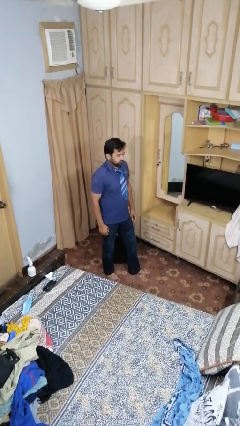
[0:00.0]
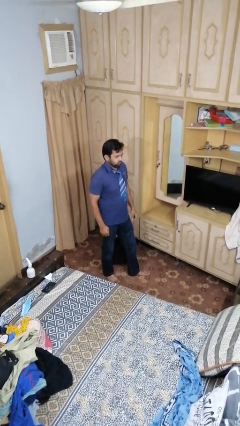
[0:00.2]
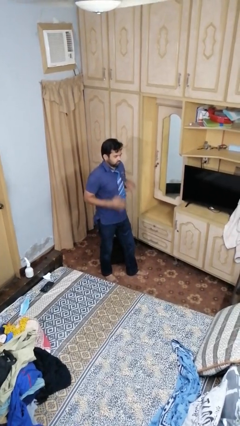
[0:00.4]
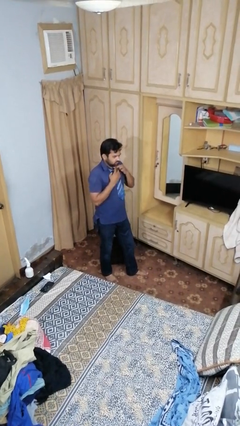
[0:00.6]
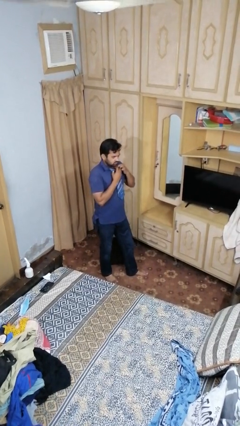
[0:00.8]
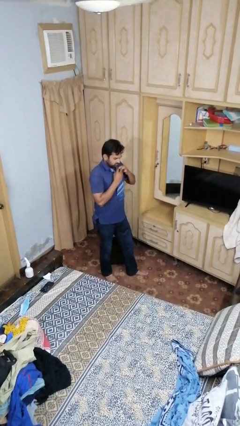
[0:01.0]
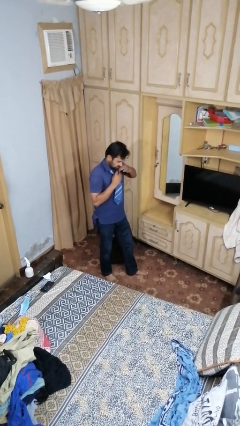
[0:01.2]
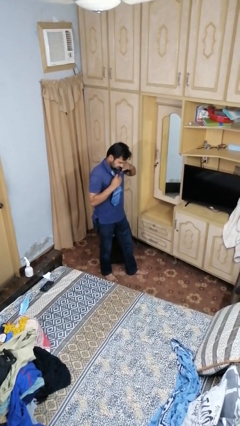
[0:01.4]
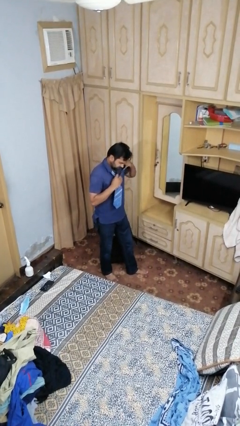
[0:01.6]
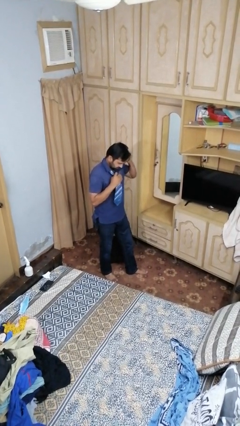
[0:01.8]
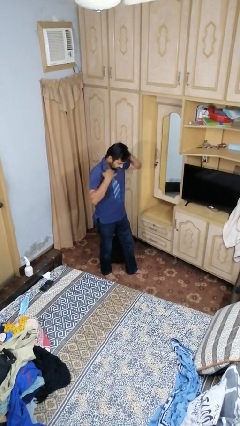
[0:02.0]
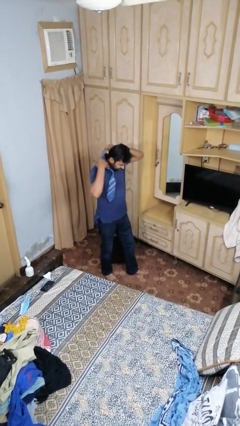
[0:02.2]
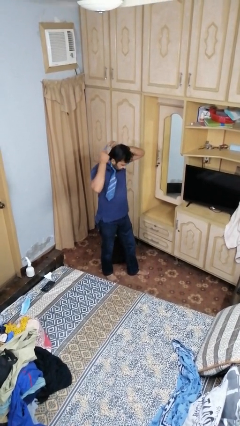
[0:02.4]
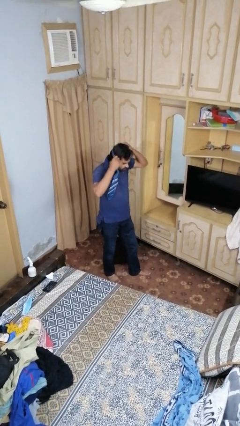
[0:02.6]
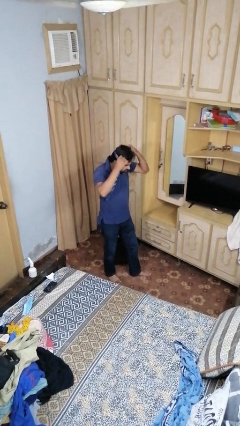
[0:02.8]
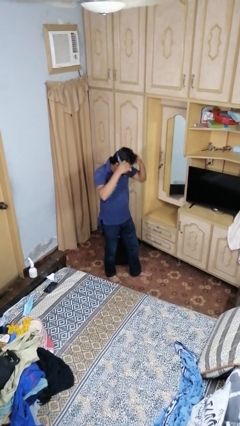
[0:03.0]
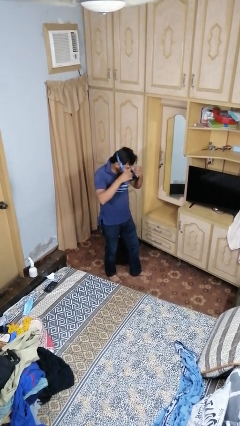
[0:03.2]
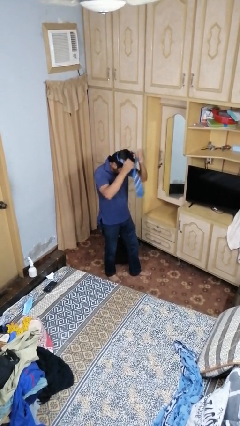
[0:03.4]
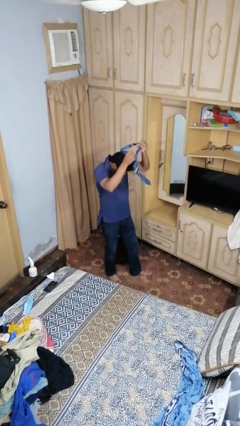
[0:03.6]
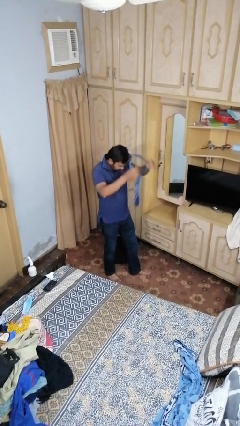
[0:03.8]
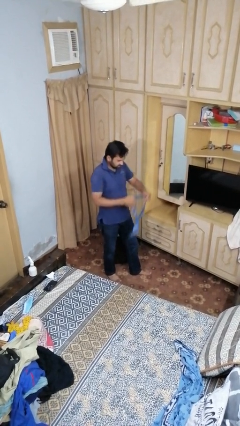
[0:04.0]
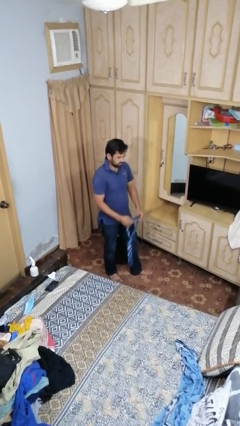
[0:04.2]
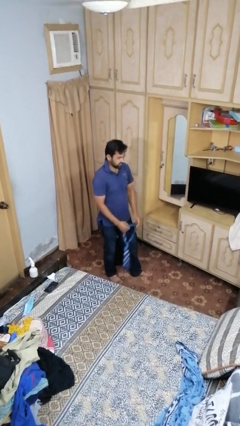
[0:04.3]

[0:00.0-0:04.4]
person takes off necktie

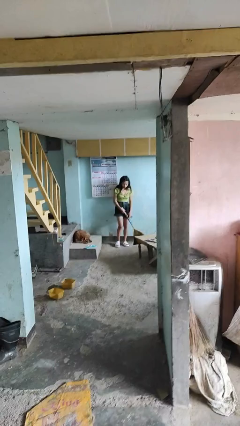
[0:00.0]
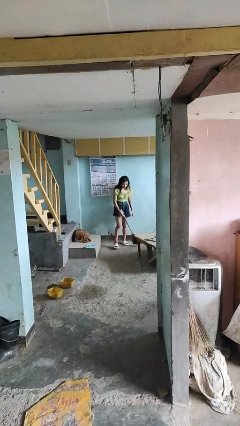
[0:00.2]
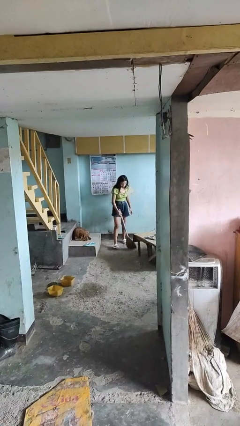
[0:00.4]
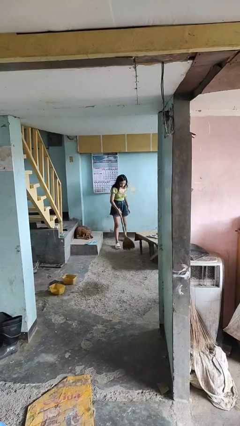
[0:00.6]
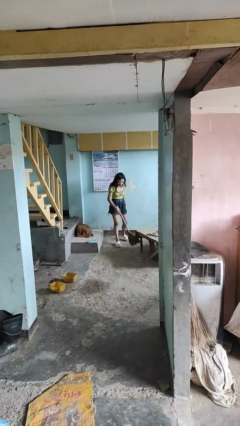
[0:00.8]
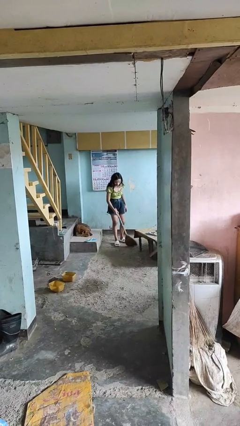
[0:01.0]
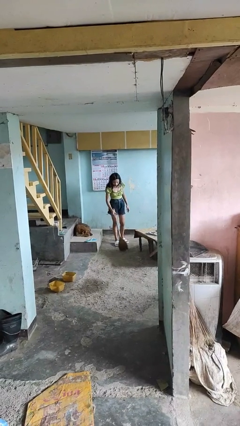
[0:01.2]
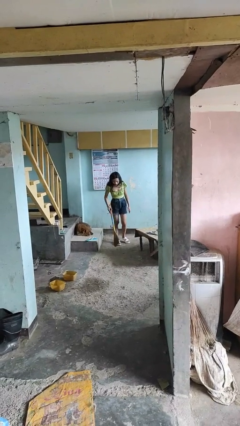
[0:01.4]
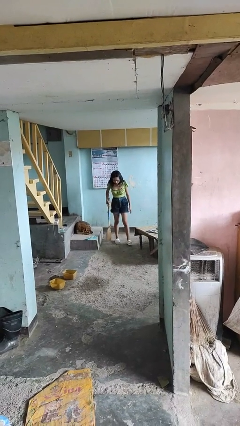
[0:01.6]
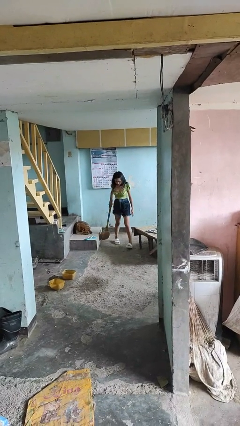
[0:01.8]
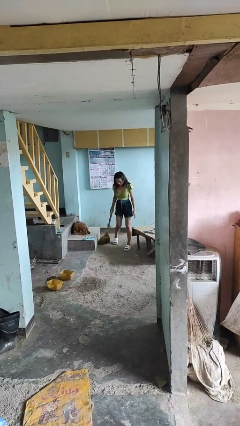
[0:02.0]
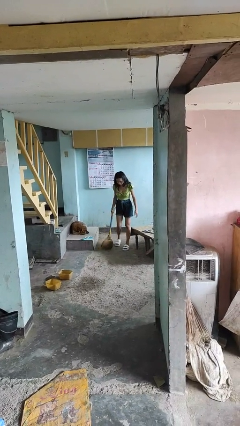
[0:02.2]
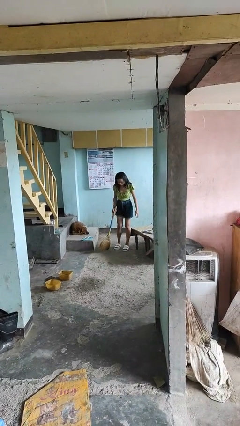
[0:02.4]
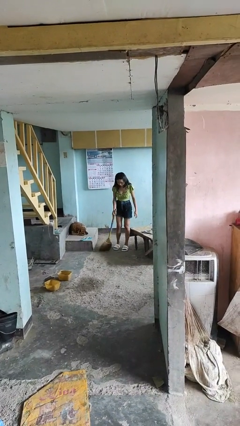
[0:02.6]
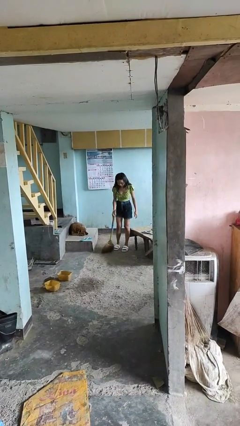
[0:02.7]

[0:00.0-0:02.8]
person sweeps floor

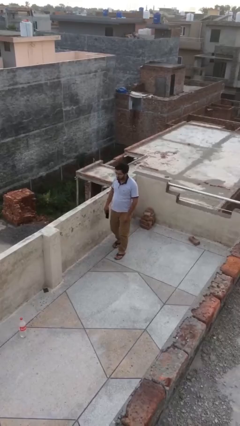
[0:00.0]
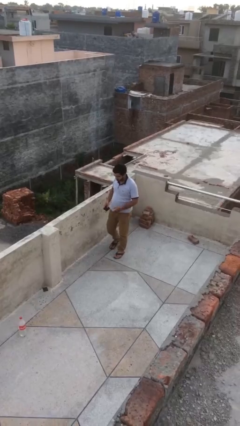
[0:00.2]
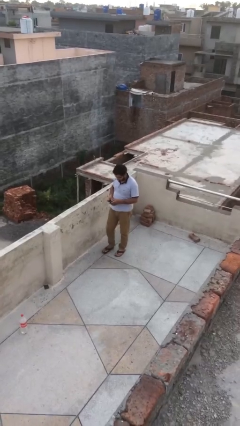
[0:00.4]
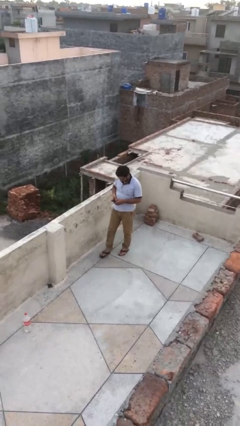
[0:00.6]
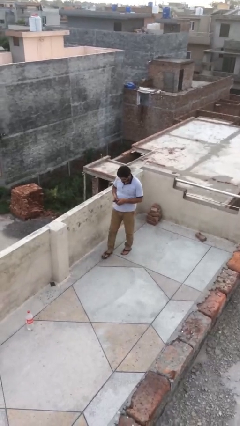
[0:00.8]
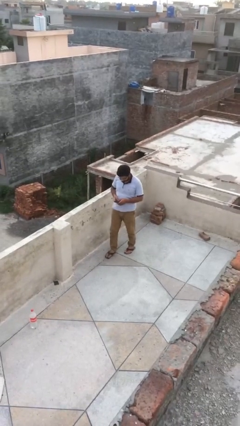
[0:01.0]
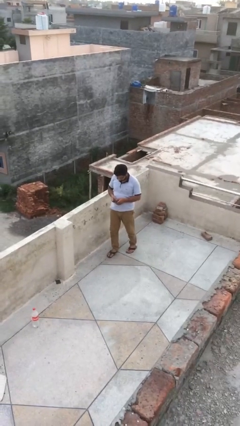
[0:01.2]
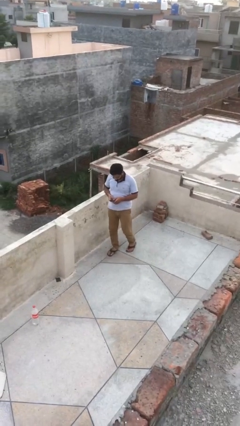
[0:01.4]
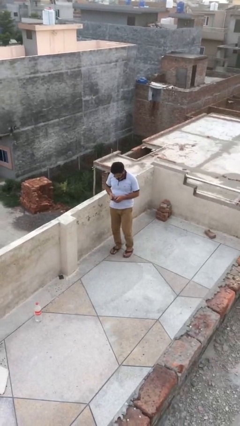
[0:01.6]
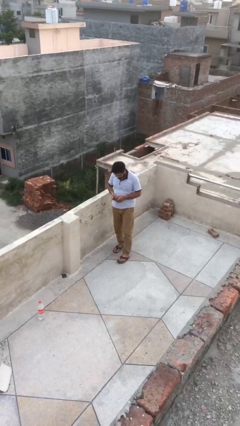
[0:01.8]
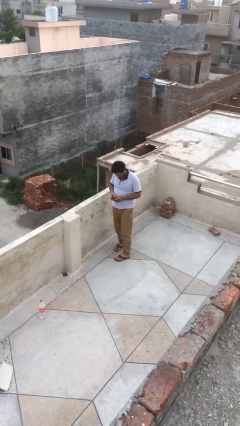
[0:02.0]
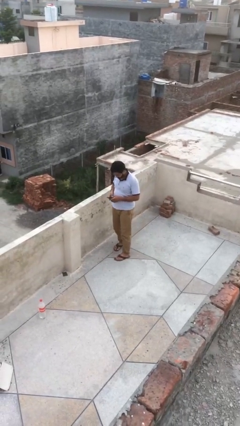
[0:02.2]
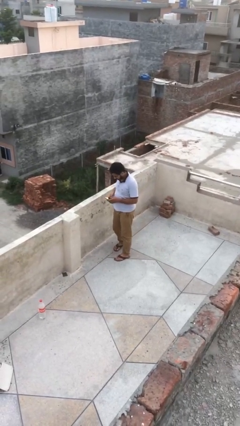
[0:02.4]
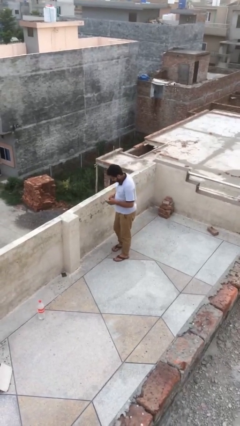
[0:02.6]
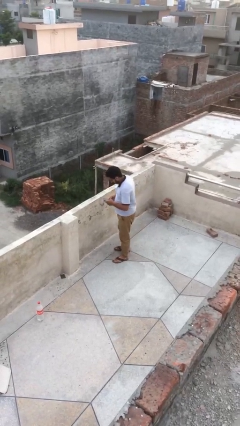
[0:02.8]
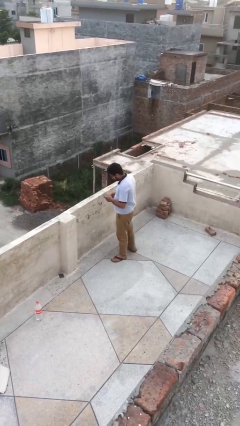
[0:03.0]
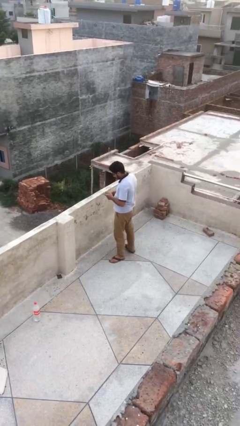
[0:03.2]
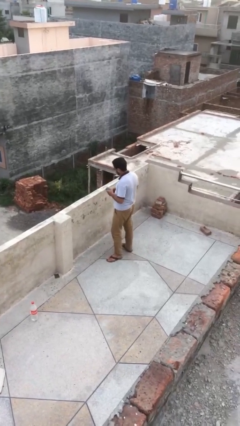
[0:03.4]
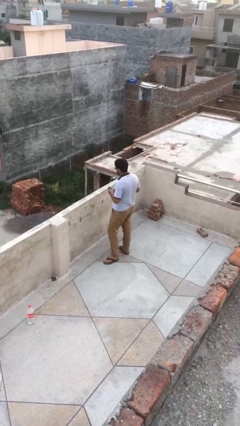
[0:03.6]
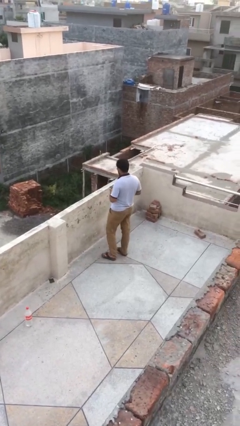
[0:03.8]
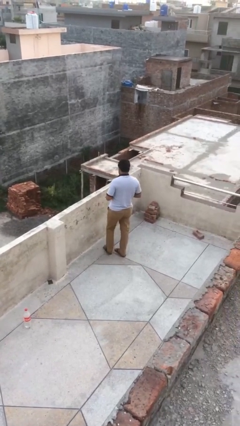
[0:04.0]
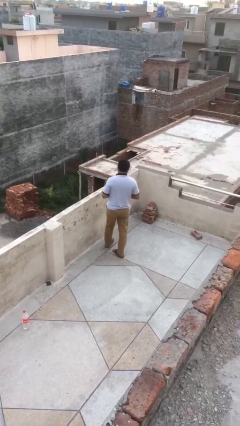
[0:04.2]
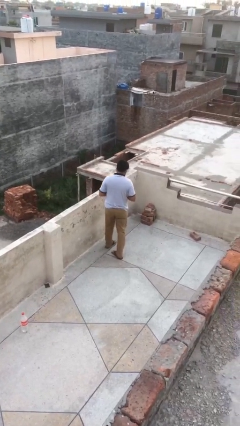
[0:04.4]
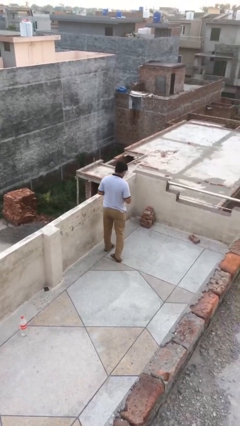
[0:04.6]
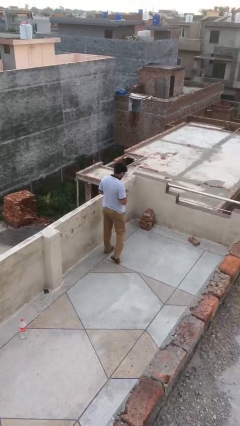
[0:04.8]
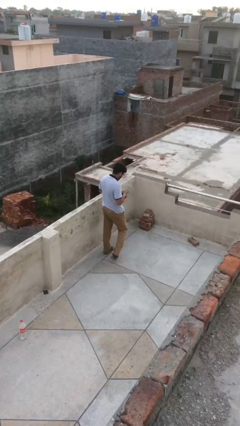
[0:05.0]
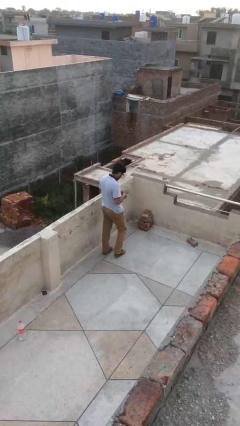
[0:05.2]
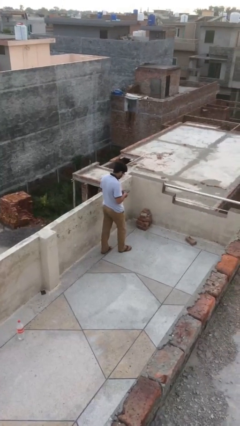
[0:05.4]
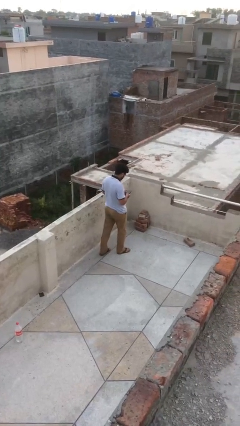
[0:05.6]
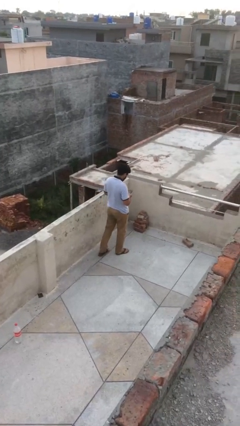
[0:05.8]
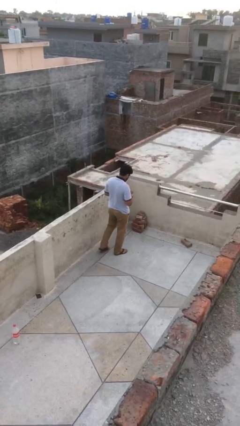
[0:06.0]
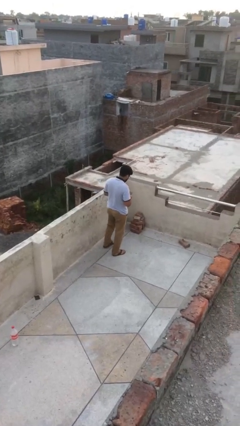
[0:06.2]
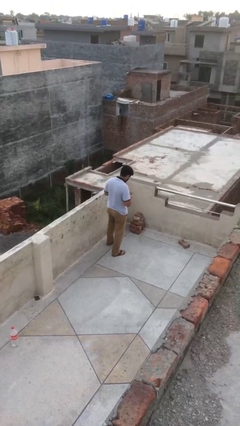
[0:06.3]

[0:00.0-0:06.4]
person texts on phone

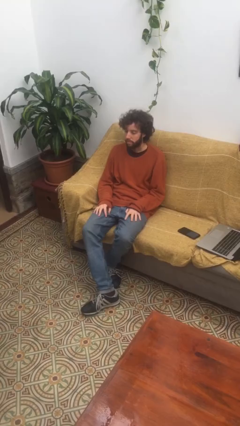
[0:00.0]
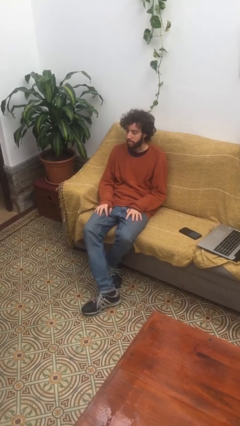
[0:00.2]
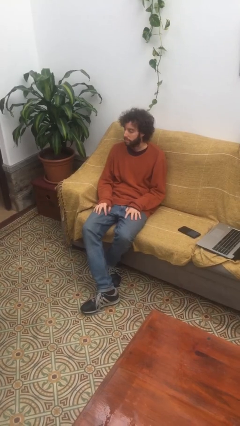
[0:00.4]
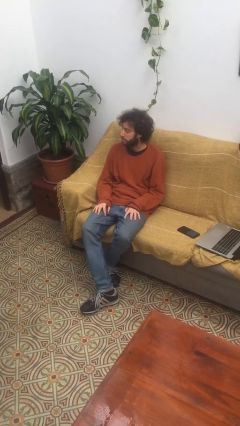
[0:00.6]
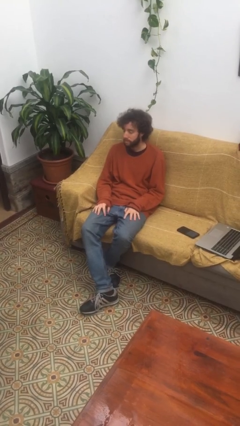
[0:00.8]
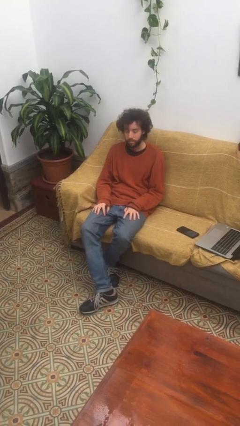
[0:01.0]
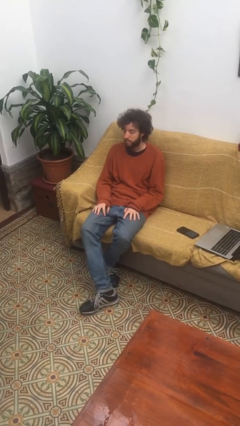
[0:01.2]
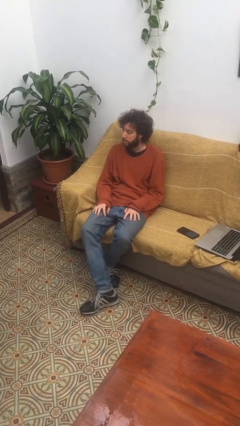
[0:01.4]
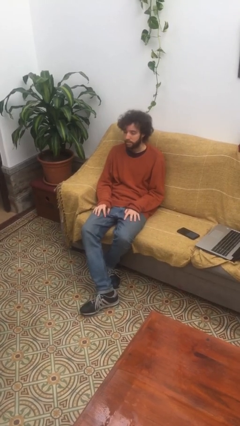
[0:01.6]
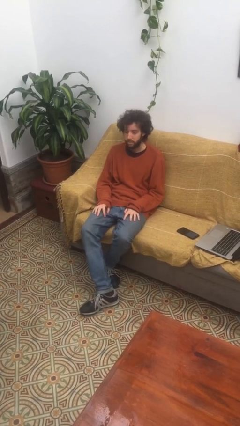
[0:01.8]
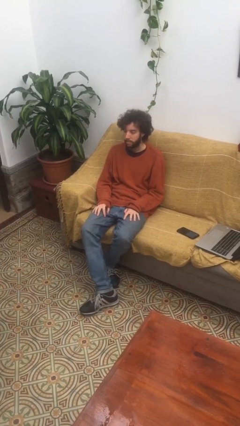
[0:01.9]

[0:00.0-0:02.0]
person shakes head

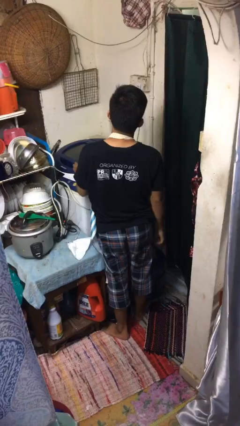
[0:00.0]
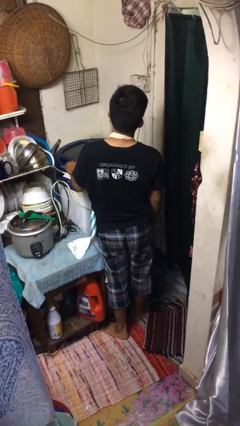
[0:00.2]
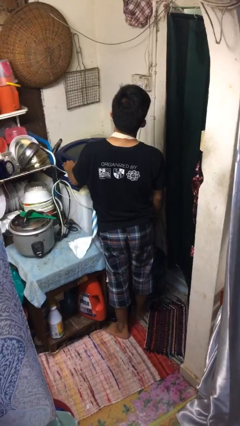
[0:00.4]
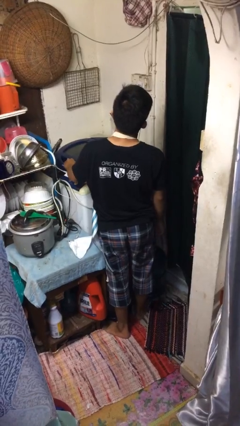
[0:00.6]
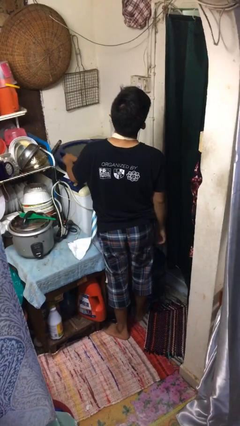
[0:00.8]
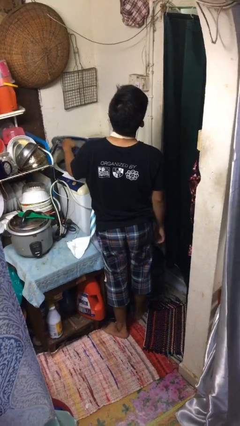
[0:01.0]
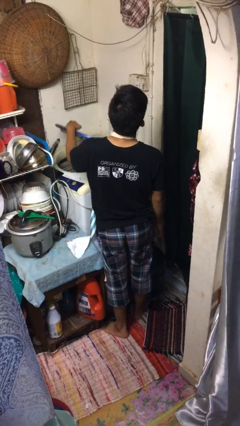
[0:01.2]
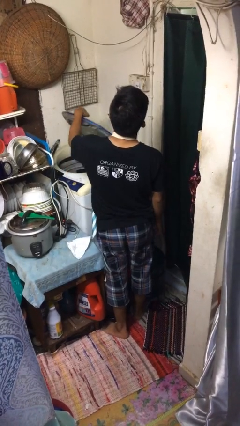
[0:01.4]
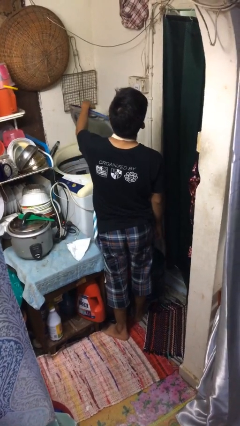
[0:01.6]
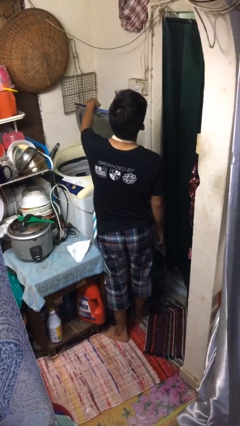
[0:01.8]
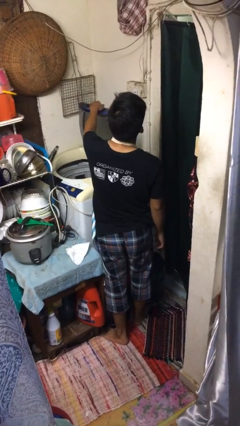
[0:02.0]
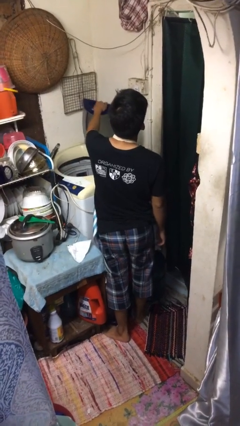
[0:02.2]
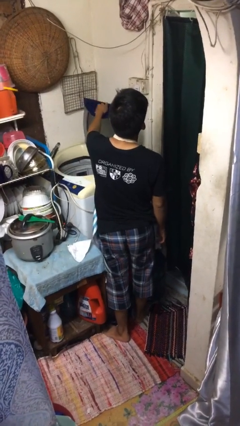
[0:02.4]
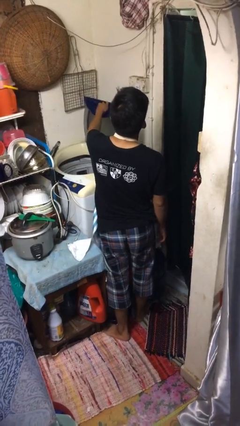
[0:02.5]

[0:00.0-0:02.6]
person opens clothes washer
